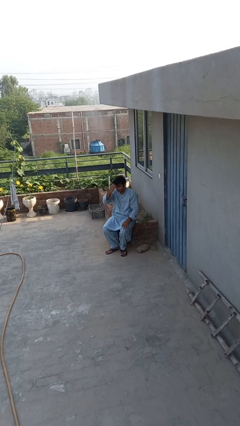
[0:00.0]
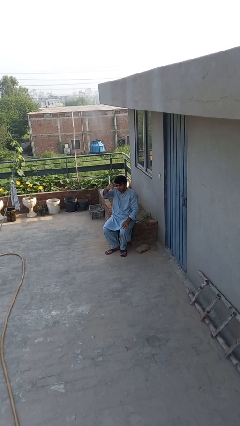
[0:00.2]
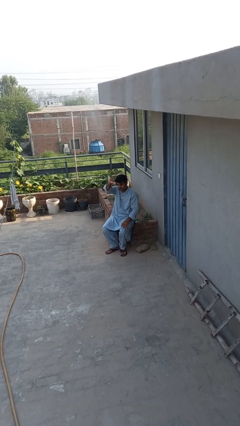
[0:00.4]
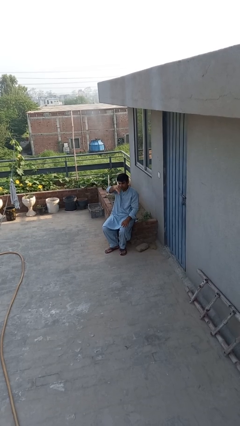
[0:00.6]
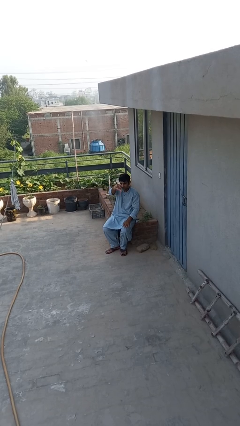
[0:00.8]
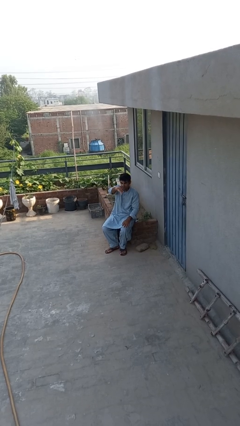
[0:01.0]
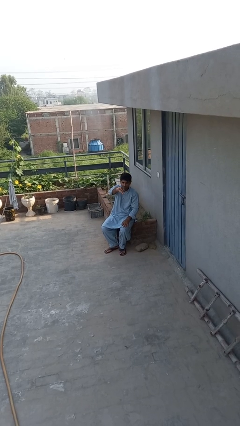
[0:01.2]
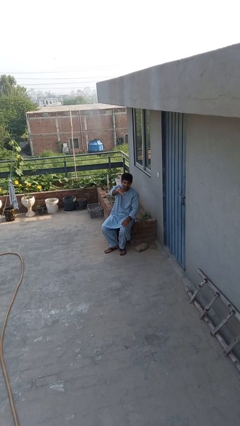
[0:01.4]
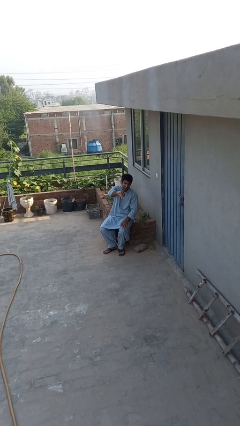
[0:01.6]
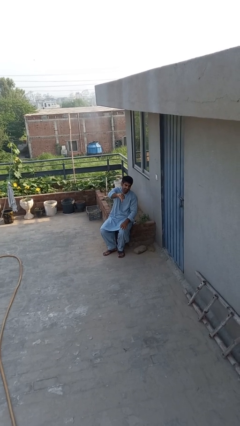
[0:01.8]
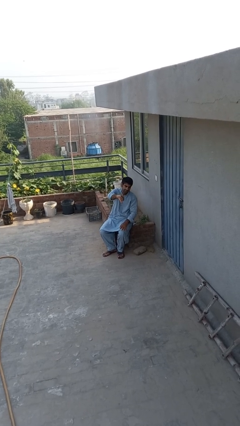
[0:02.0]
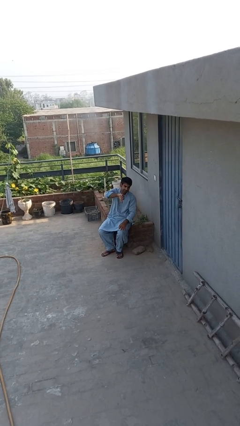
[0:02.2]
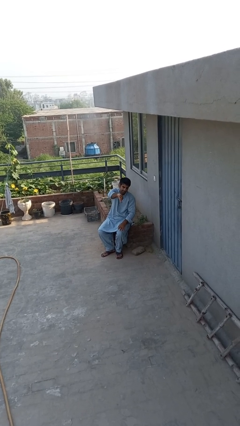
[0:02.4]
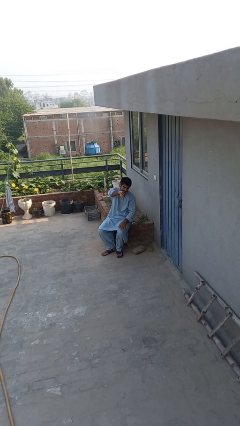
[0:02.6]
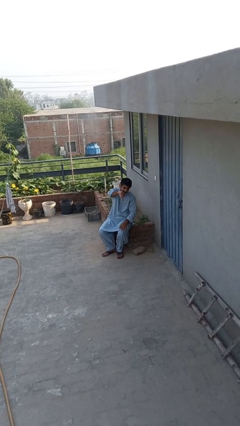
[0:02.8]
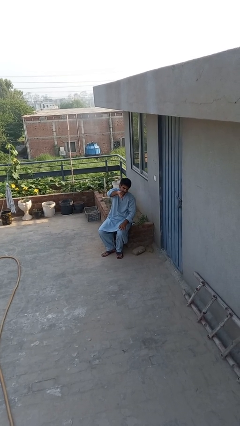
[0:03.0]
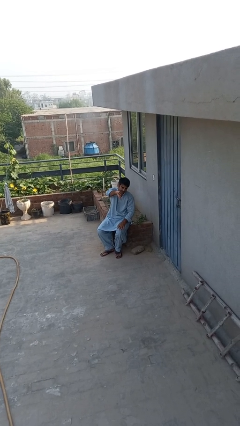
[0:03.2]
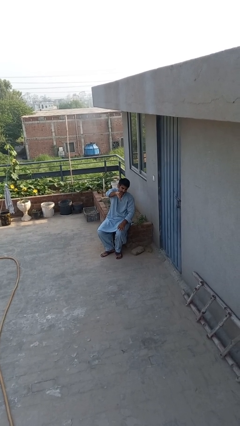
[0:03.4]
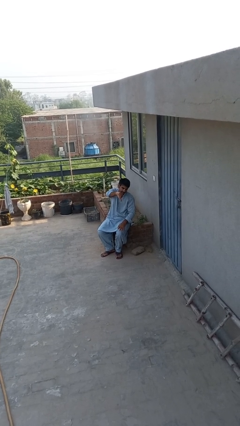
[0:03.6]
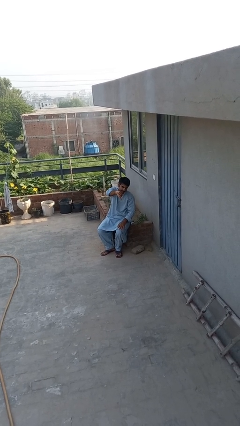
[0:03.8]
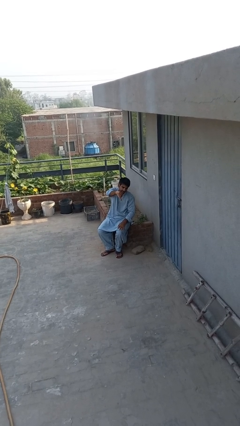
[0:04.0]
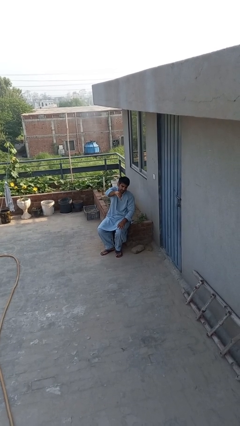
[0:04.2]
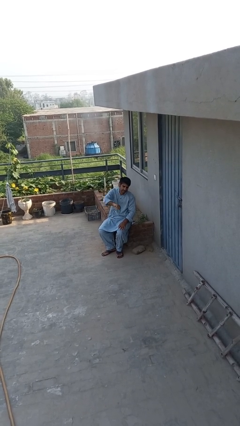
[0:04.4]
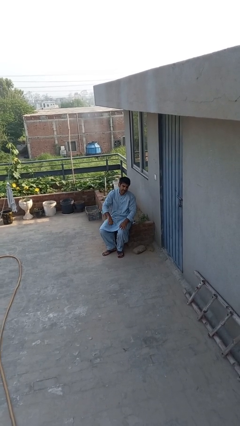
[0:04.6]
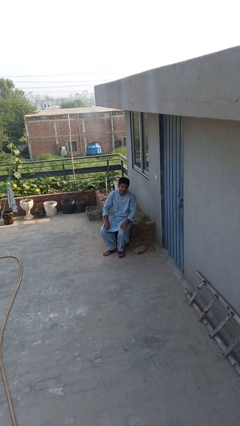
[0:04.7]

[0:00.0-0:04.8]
person gestures thumbs down

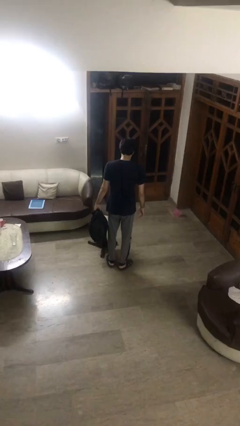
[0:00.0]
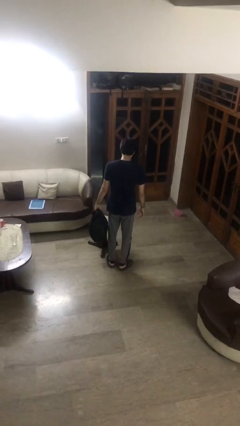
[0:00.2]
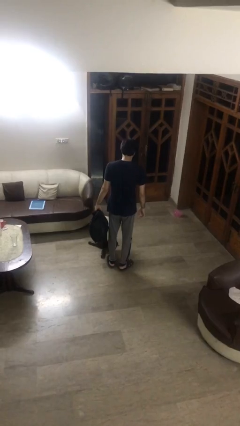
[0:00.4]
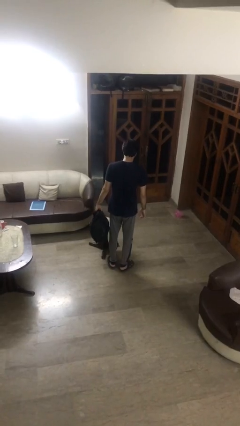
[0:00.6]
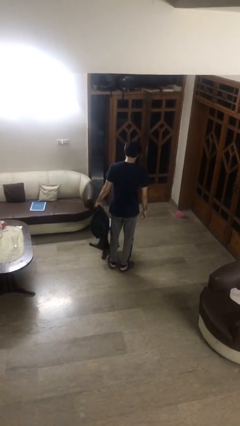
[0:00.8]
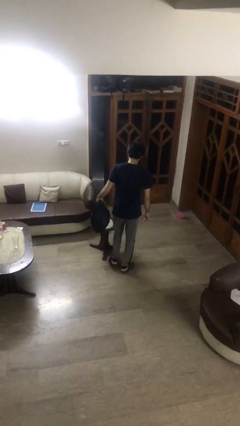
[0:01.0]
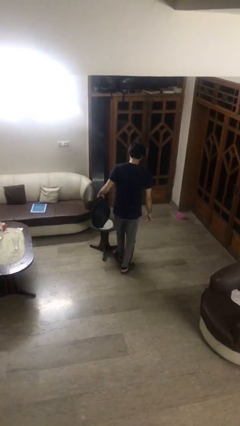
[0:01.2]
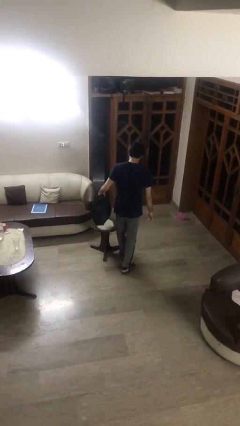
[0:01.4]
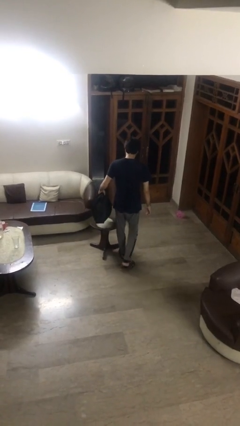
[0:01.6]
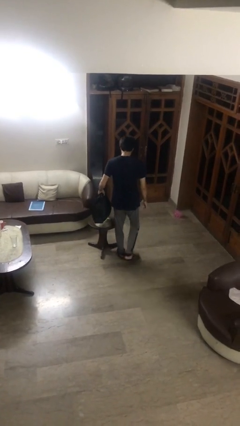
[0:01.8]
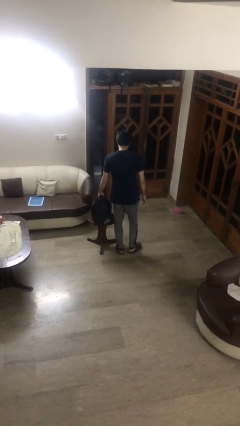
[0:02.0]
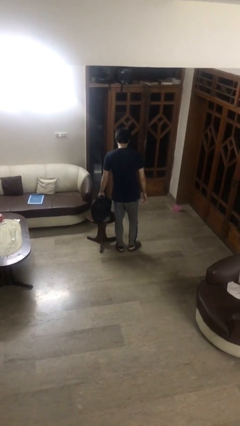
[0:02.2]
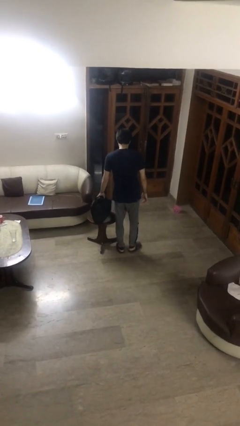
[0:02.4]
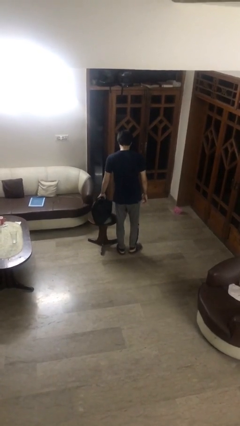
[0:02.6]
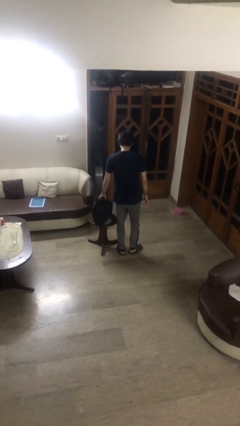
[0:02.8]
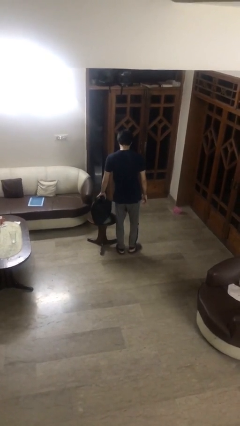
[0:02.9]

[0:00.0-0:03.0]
person puts down object on table

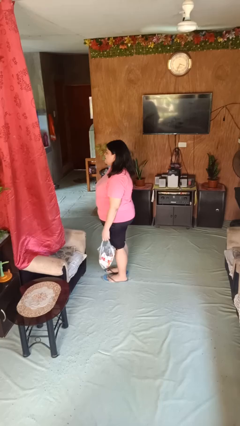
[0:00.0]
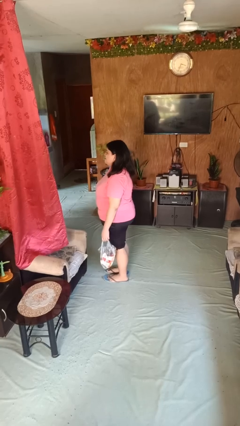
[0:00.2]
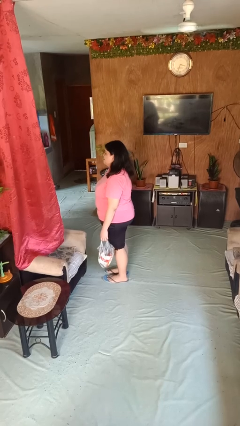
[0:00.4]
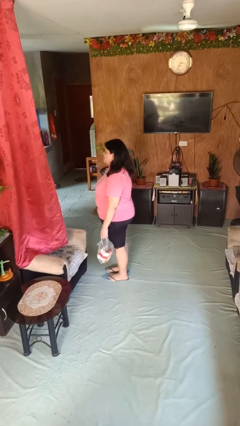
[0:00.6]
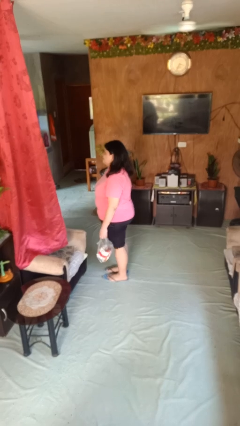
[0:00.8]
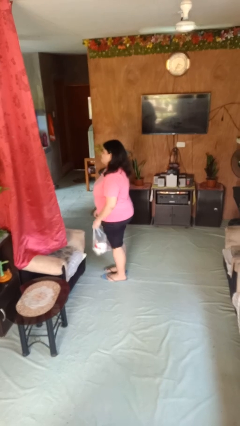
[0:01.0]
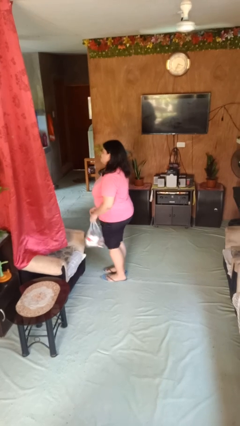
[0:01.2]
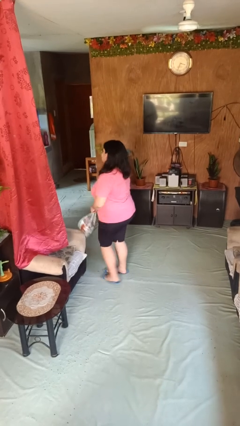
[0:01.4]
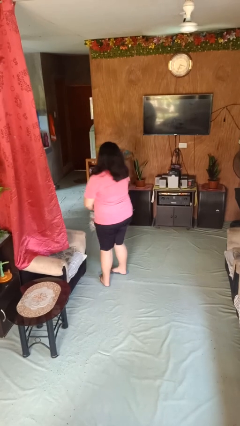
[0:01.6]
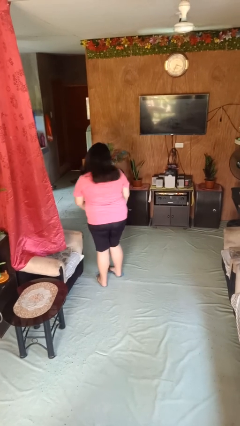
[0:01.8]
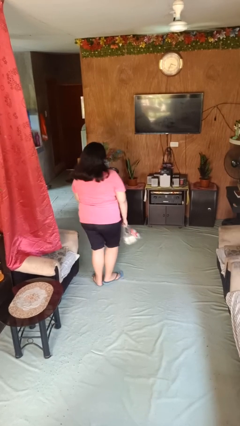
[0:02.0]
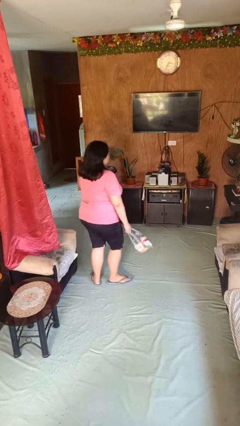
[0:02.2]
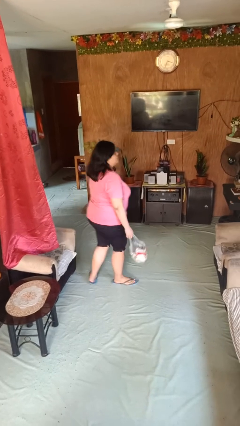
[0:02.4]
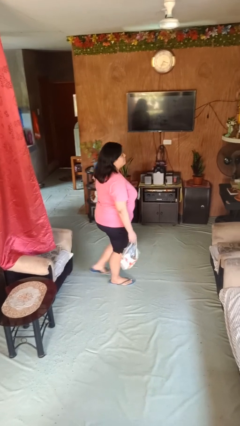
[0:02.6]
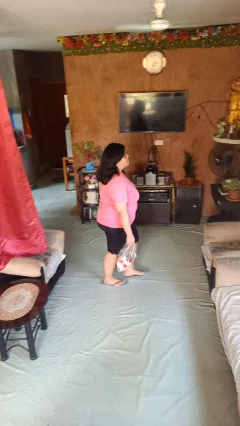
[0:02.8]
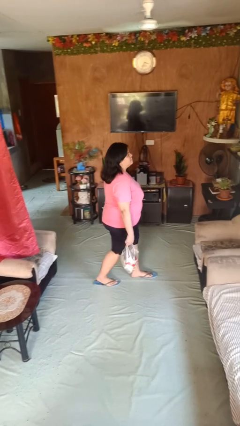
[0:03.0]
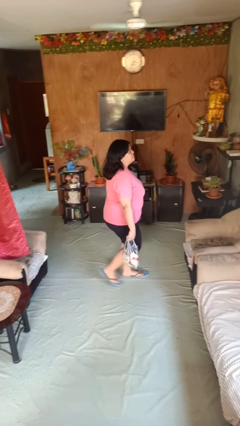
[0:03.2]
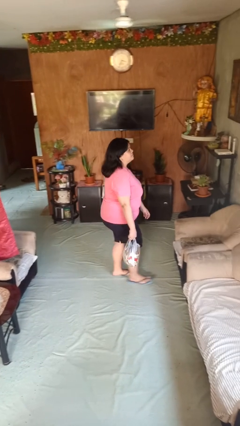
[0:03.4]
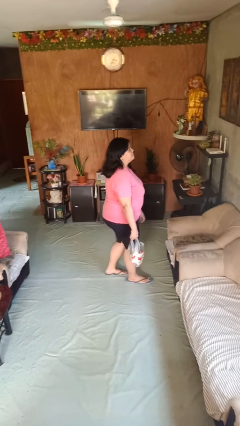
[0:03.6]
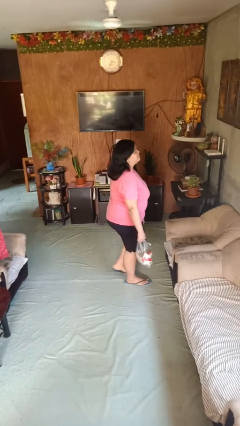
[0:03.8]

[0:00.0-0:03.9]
person carries groceries

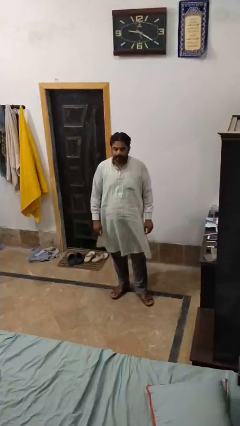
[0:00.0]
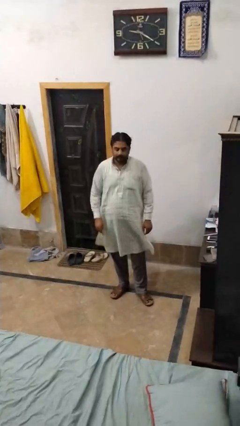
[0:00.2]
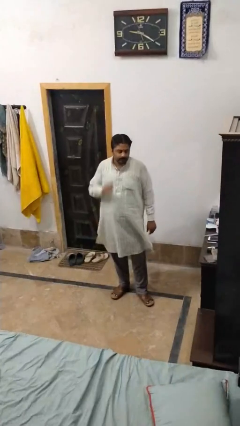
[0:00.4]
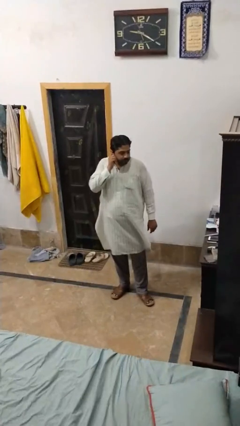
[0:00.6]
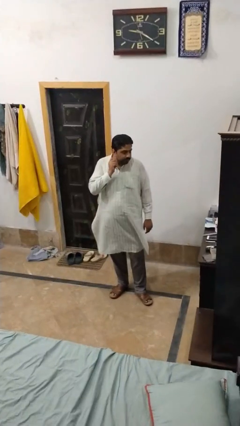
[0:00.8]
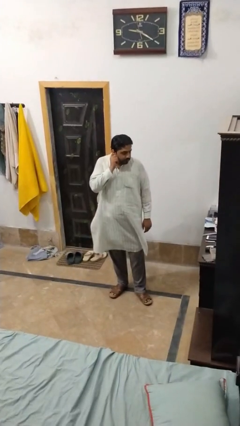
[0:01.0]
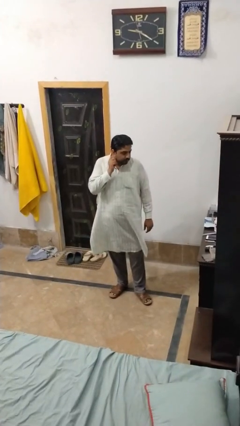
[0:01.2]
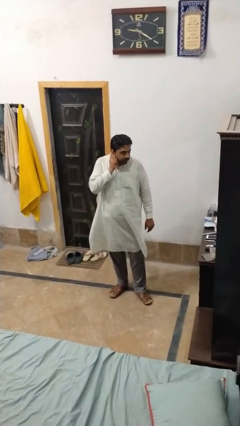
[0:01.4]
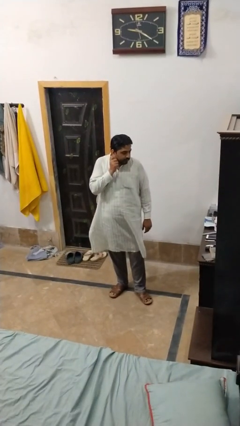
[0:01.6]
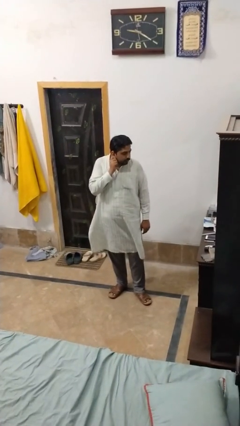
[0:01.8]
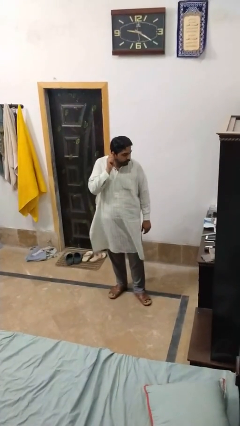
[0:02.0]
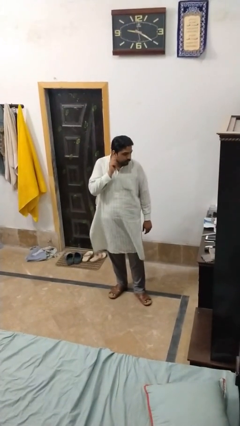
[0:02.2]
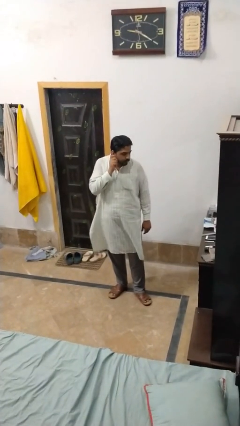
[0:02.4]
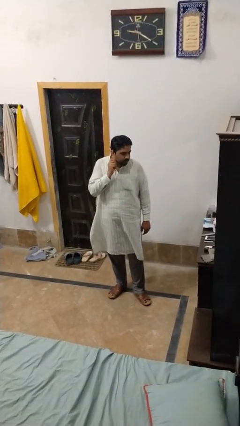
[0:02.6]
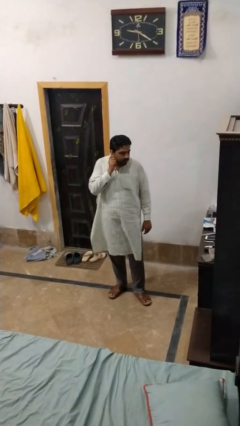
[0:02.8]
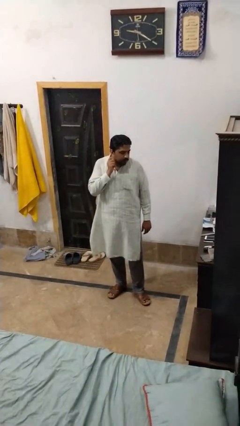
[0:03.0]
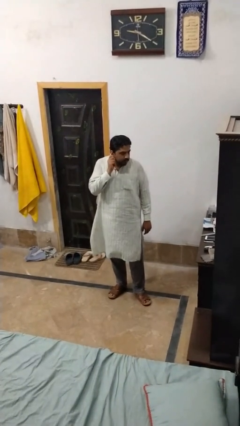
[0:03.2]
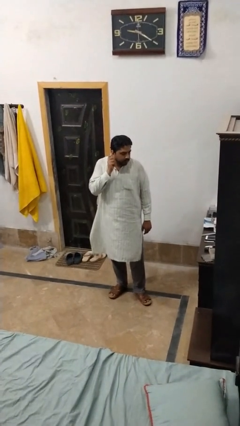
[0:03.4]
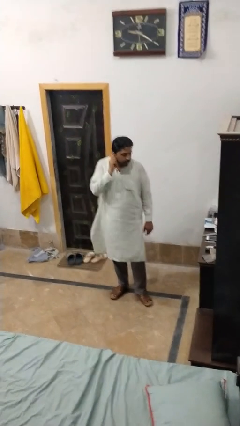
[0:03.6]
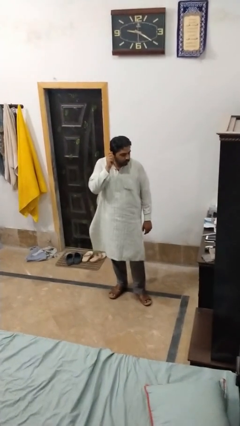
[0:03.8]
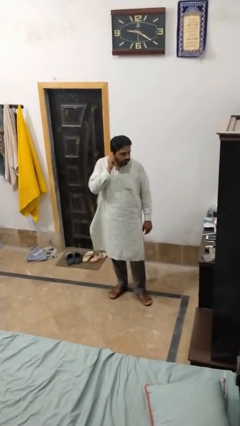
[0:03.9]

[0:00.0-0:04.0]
person touches earlobe

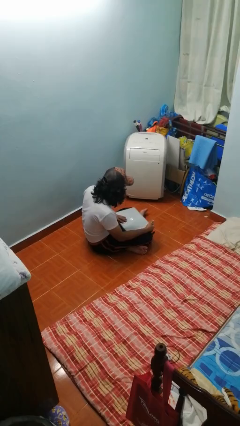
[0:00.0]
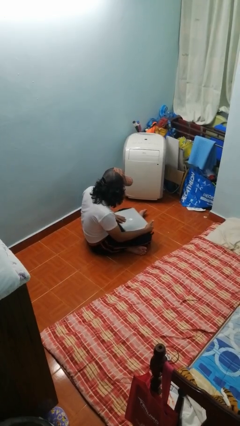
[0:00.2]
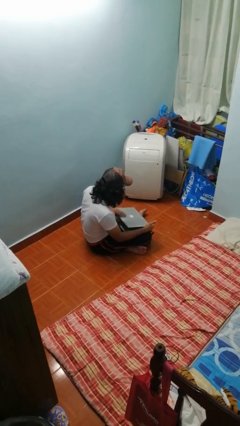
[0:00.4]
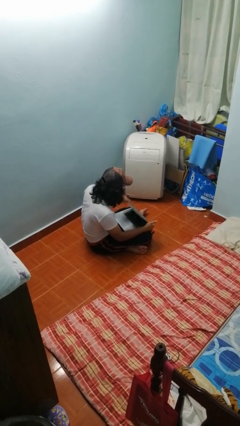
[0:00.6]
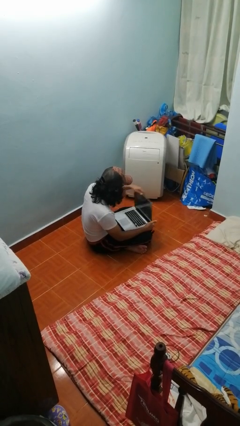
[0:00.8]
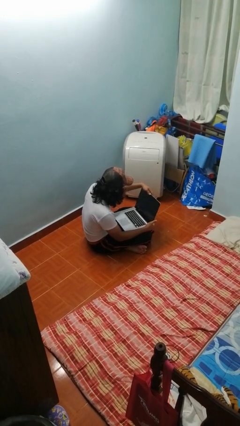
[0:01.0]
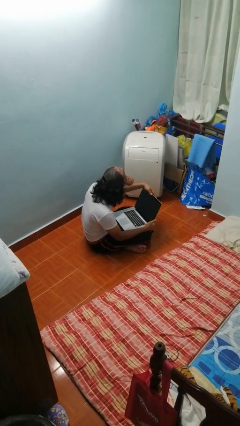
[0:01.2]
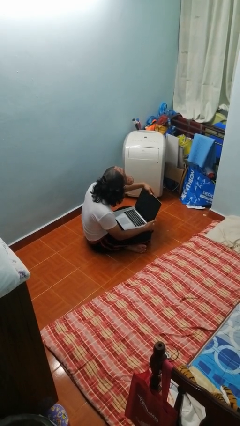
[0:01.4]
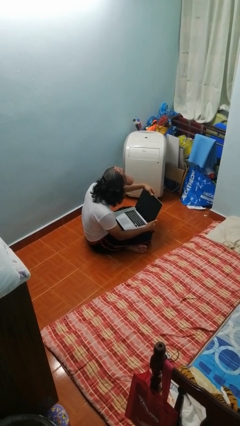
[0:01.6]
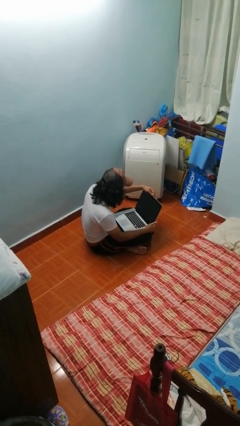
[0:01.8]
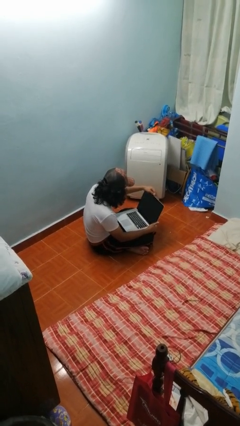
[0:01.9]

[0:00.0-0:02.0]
person opens laptop
